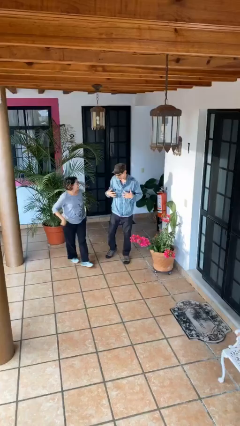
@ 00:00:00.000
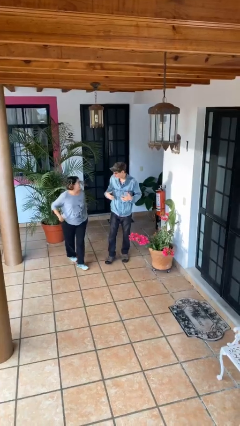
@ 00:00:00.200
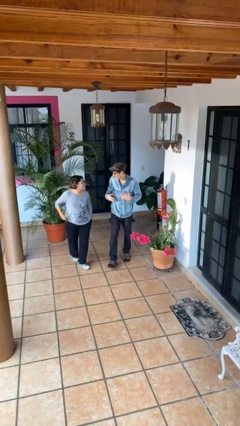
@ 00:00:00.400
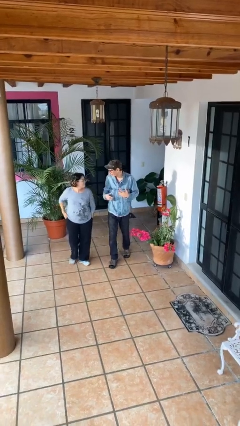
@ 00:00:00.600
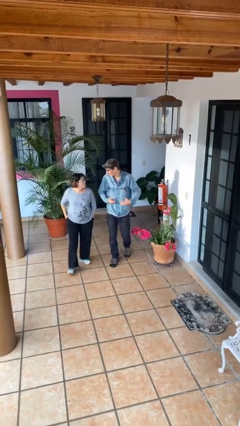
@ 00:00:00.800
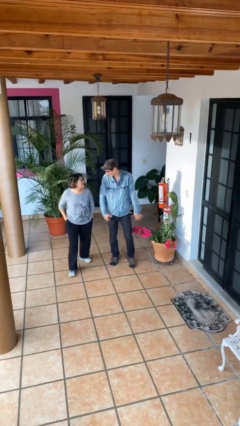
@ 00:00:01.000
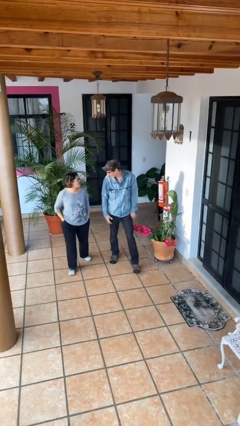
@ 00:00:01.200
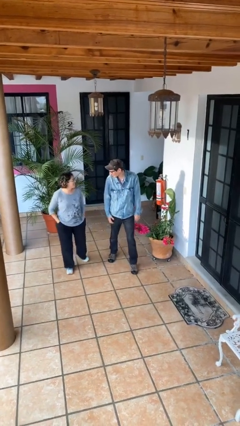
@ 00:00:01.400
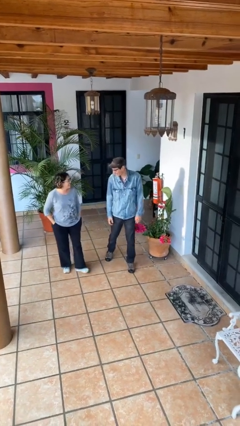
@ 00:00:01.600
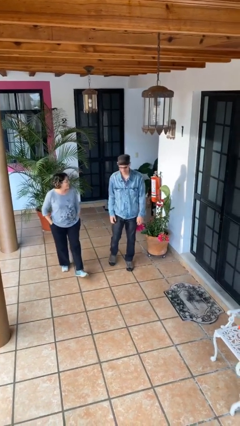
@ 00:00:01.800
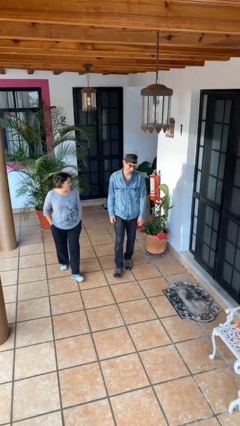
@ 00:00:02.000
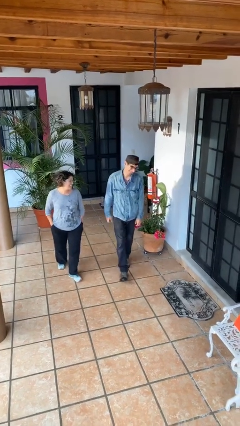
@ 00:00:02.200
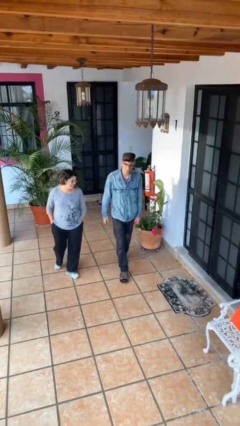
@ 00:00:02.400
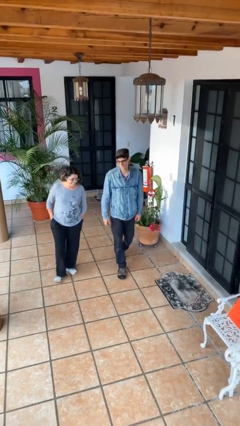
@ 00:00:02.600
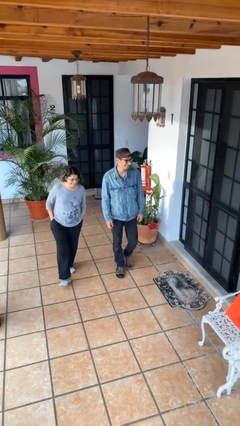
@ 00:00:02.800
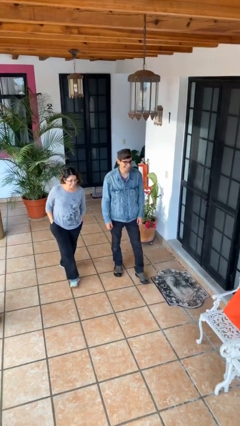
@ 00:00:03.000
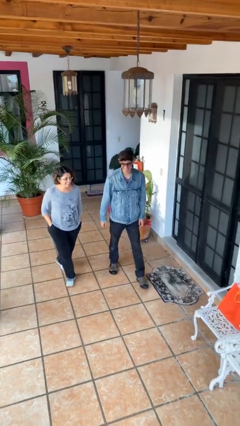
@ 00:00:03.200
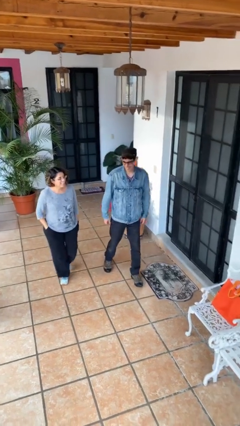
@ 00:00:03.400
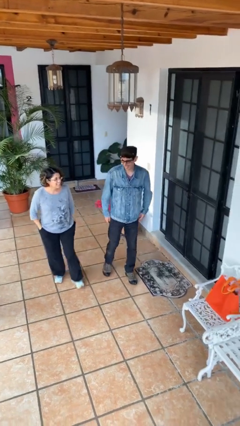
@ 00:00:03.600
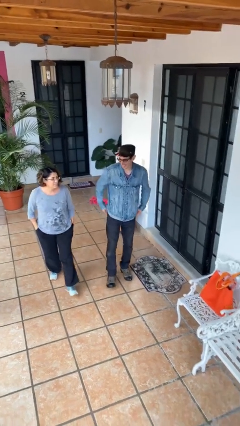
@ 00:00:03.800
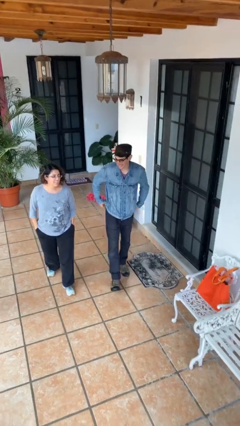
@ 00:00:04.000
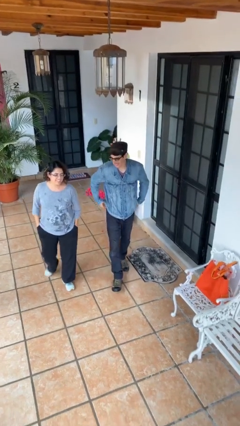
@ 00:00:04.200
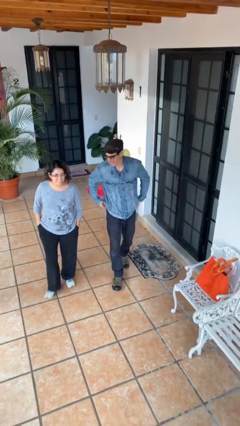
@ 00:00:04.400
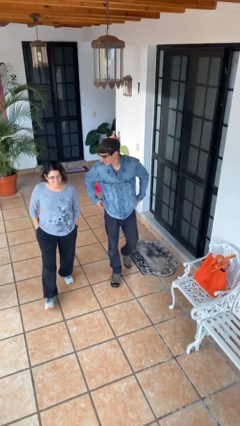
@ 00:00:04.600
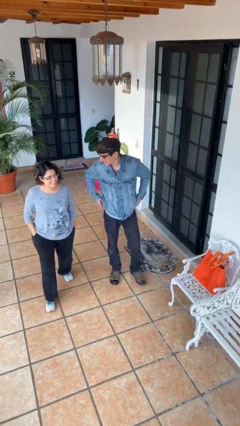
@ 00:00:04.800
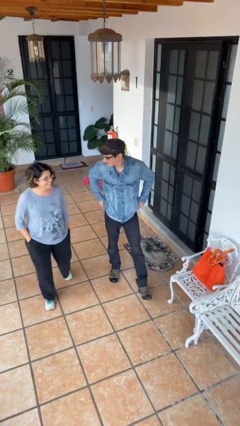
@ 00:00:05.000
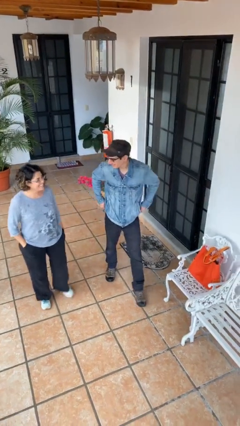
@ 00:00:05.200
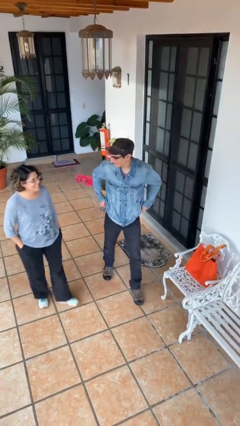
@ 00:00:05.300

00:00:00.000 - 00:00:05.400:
person talks to person

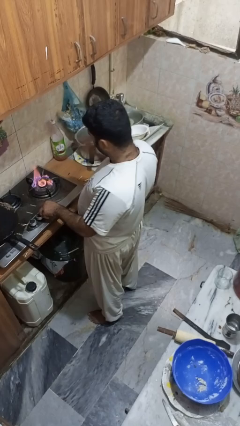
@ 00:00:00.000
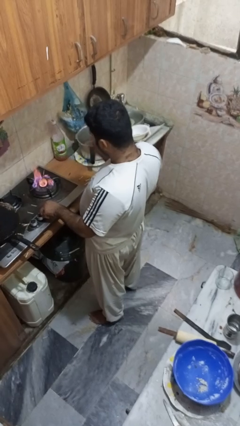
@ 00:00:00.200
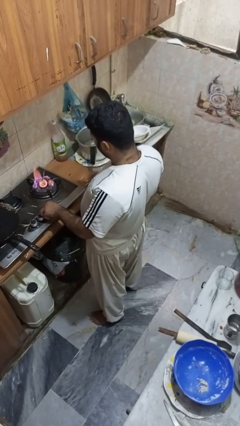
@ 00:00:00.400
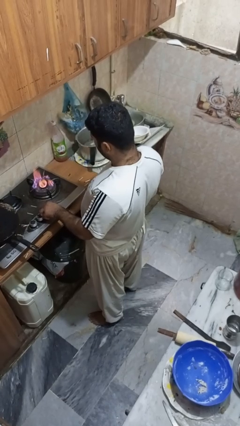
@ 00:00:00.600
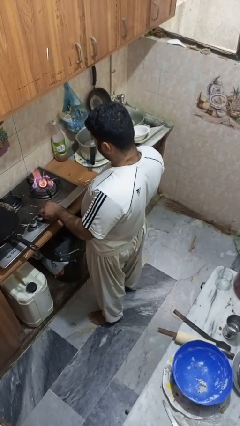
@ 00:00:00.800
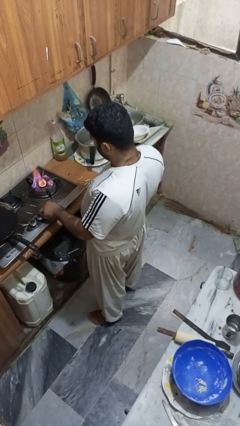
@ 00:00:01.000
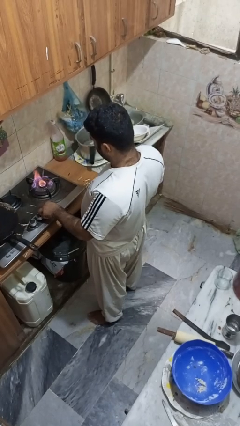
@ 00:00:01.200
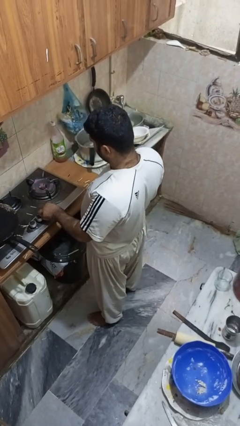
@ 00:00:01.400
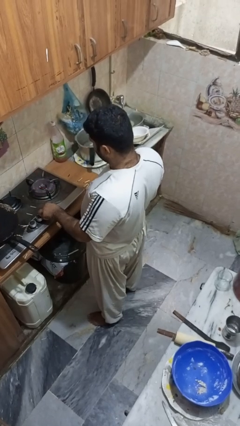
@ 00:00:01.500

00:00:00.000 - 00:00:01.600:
person turns off stovetop

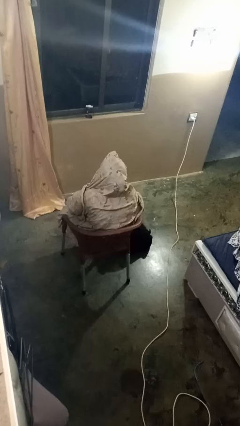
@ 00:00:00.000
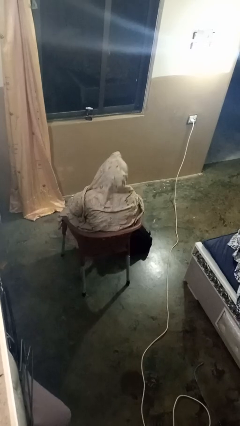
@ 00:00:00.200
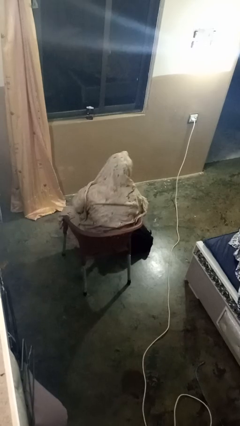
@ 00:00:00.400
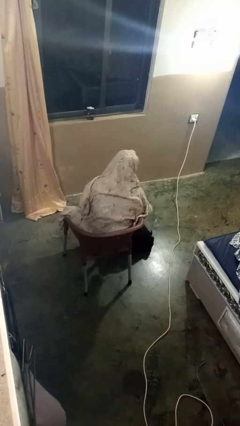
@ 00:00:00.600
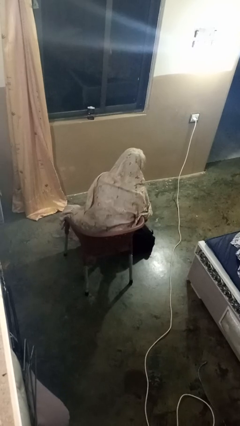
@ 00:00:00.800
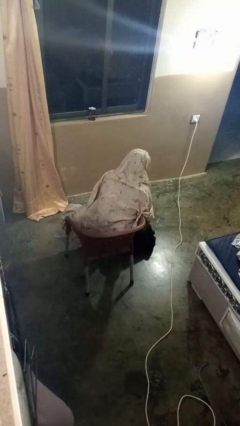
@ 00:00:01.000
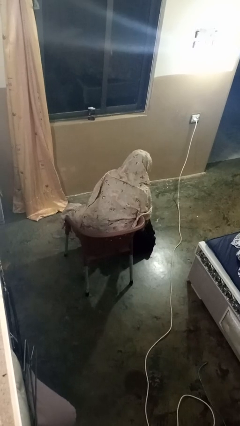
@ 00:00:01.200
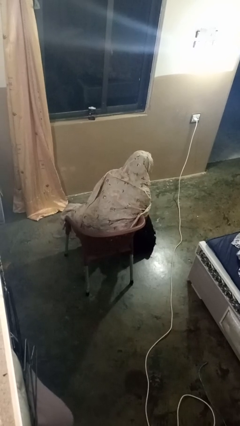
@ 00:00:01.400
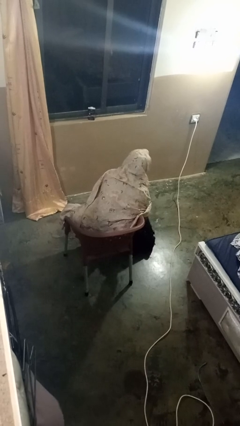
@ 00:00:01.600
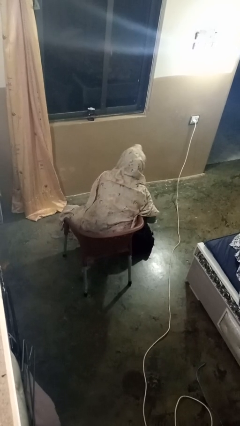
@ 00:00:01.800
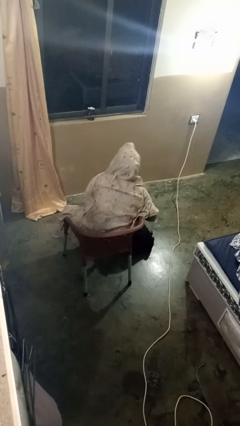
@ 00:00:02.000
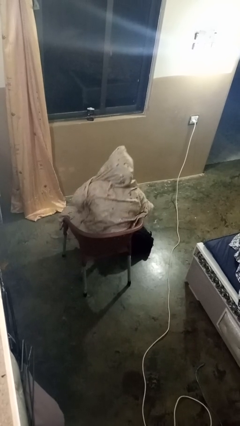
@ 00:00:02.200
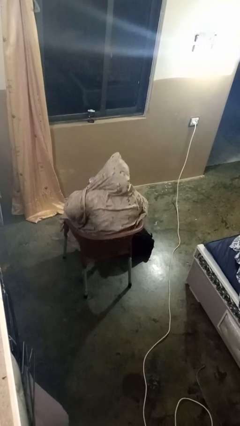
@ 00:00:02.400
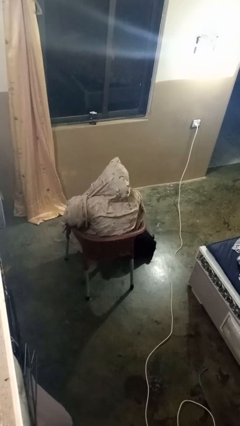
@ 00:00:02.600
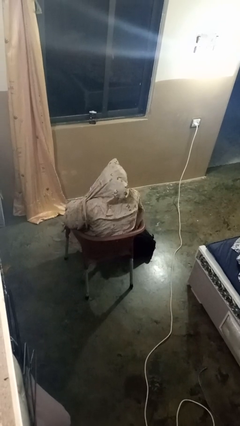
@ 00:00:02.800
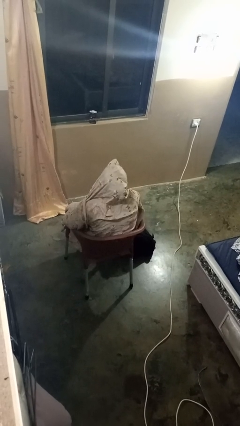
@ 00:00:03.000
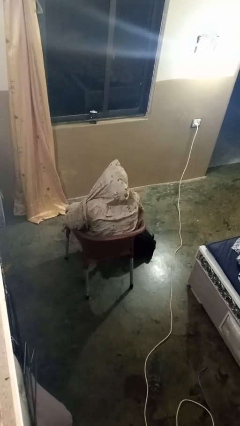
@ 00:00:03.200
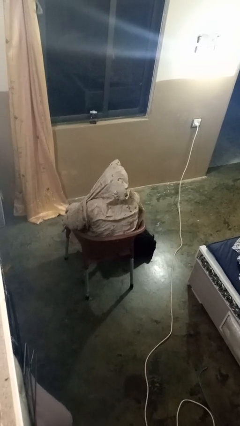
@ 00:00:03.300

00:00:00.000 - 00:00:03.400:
person eats snack from bag

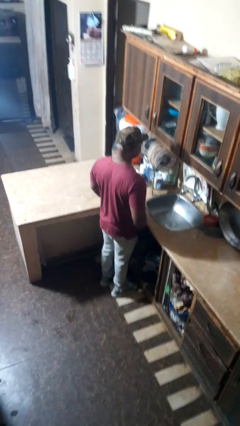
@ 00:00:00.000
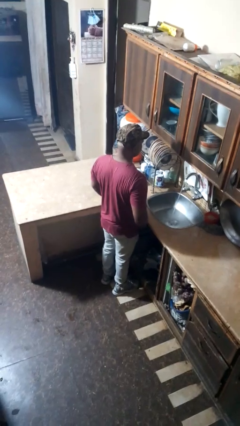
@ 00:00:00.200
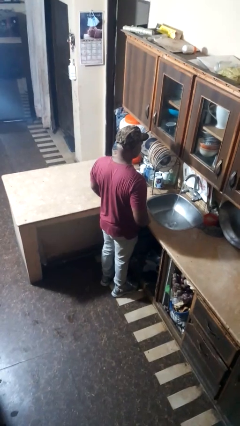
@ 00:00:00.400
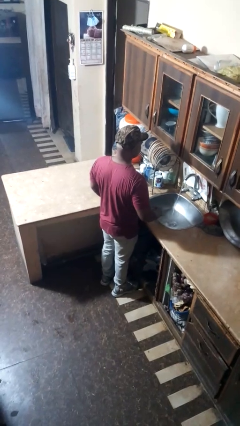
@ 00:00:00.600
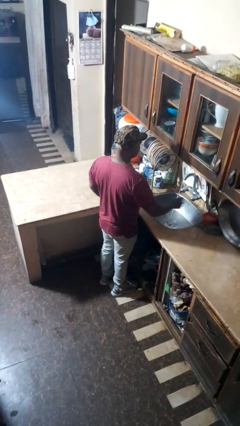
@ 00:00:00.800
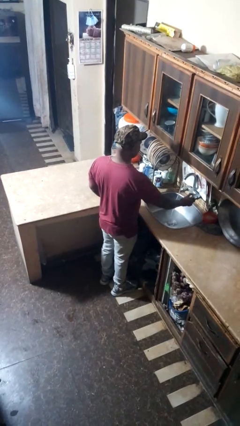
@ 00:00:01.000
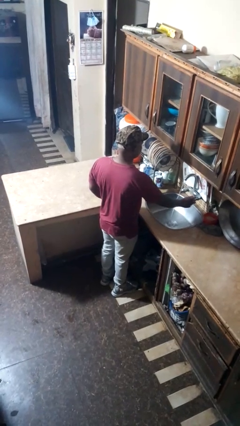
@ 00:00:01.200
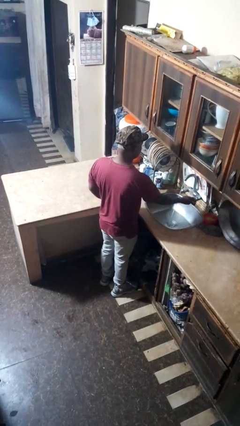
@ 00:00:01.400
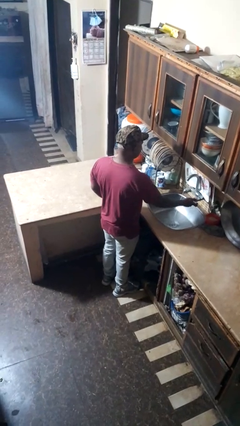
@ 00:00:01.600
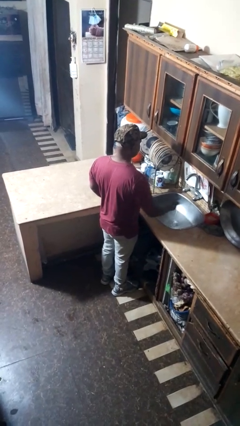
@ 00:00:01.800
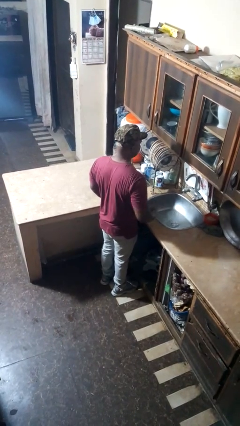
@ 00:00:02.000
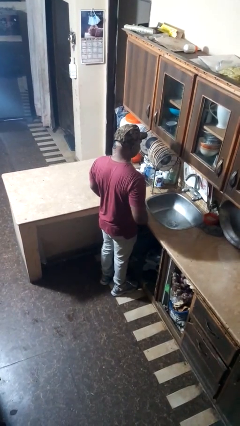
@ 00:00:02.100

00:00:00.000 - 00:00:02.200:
person turns off faucet

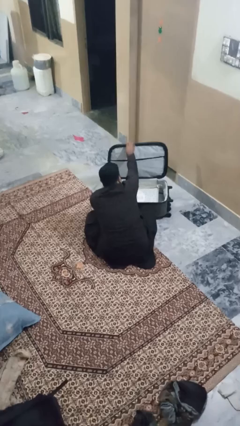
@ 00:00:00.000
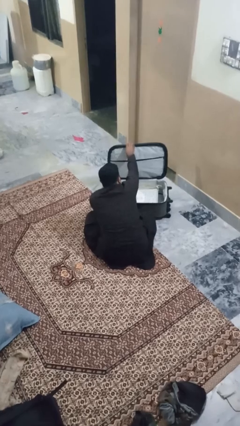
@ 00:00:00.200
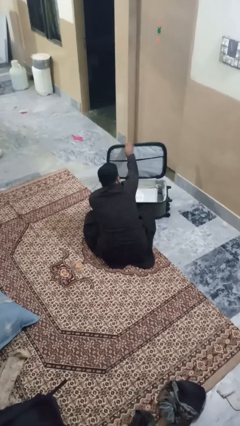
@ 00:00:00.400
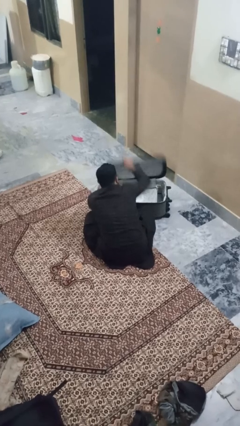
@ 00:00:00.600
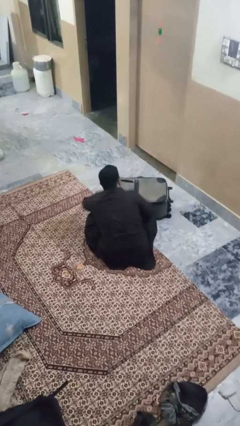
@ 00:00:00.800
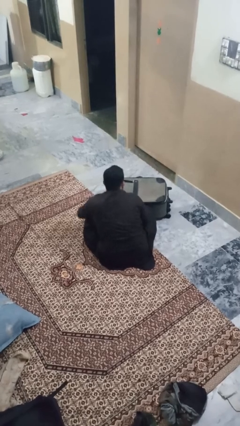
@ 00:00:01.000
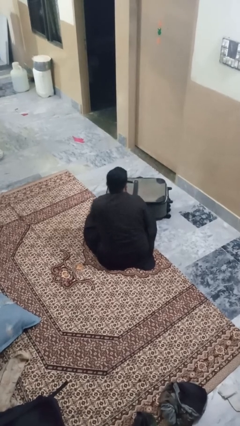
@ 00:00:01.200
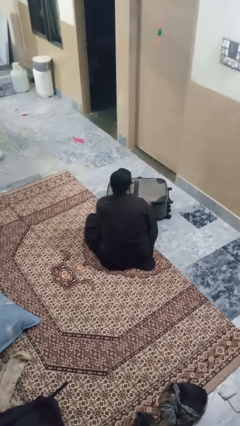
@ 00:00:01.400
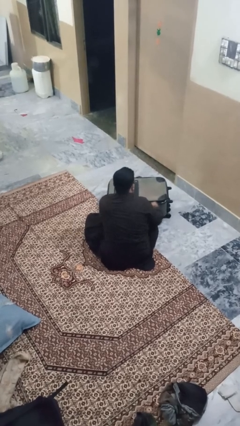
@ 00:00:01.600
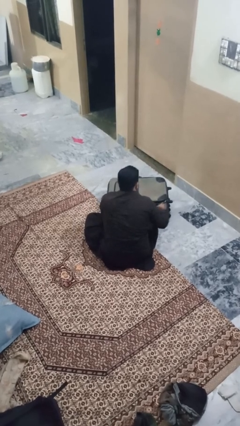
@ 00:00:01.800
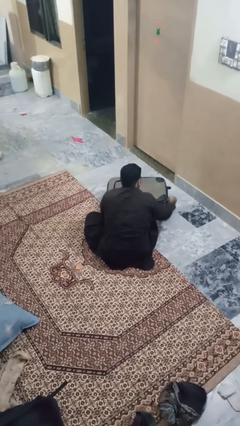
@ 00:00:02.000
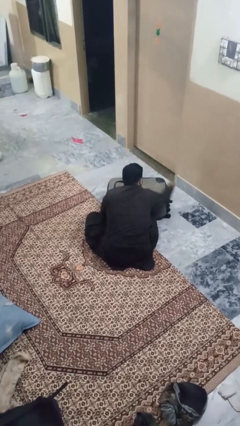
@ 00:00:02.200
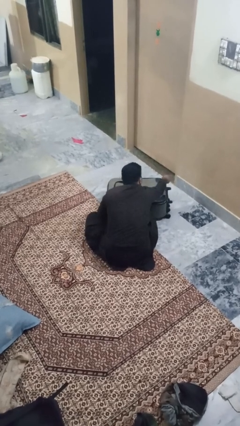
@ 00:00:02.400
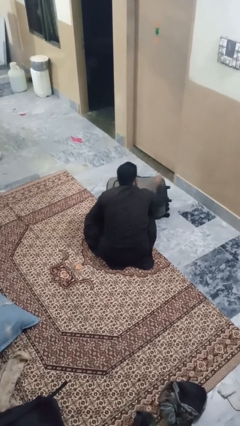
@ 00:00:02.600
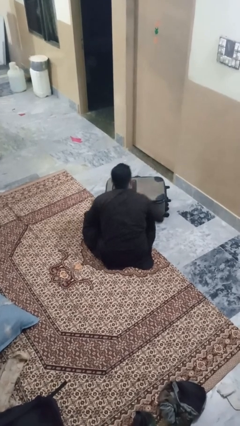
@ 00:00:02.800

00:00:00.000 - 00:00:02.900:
person closes suitcase

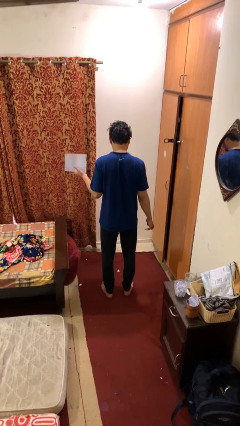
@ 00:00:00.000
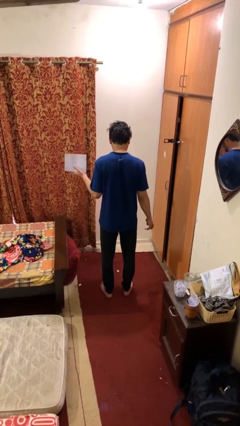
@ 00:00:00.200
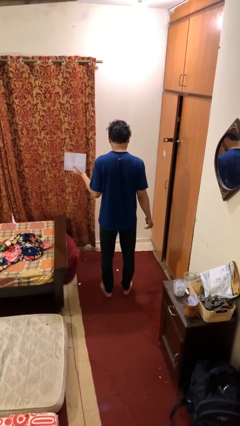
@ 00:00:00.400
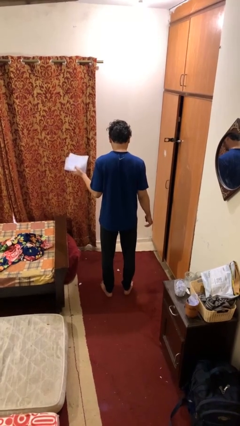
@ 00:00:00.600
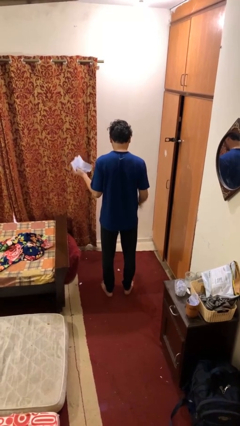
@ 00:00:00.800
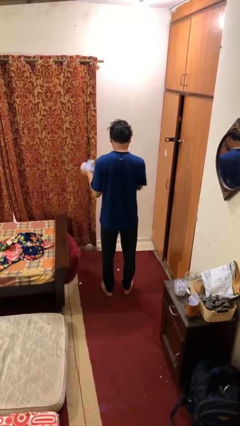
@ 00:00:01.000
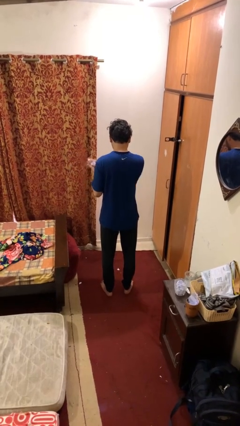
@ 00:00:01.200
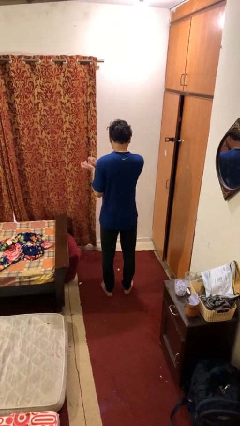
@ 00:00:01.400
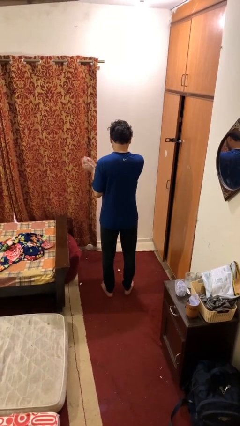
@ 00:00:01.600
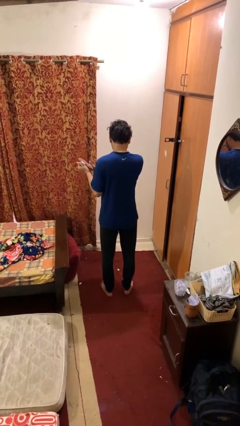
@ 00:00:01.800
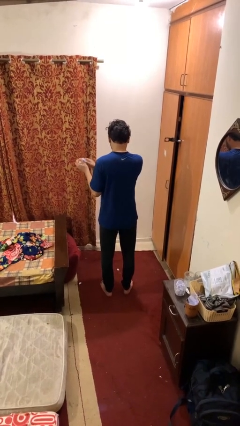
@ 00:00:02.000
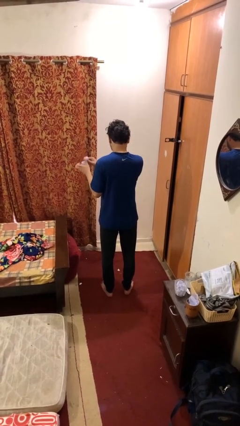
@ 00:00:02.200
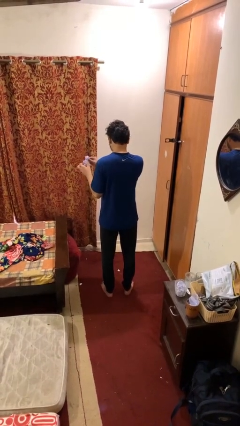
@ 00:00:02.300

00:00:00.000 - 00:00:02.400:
person crumples paper
